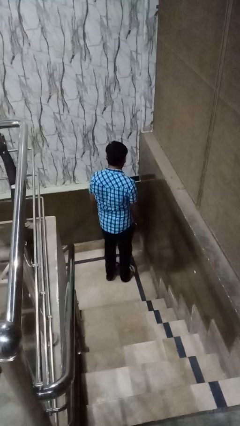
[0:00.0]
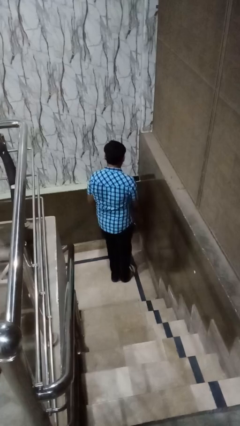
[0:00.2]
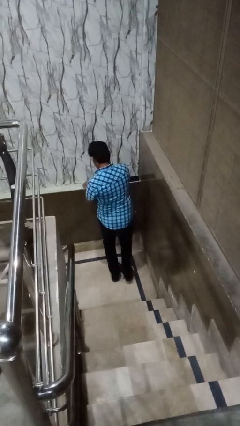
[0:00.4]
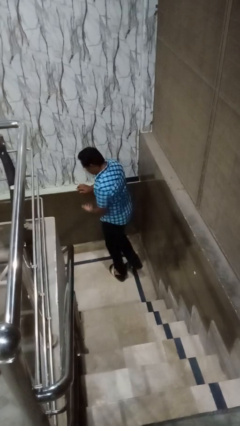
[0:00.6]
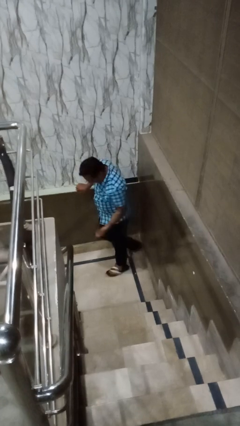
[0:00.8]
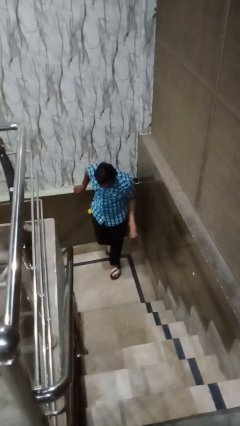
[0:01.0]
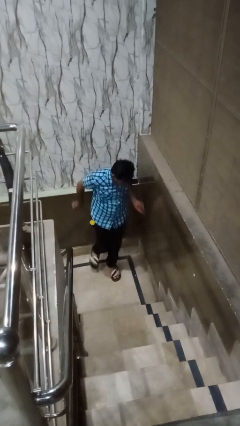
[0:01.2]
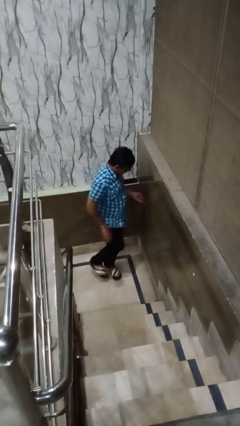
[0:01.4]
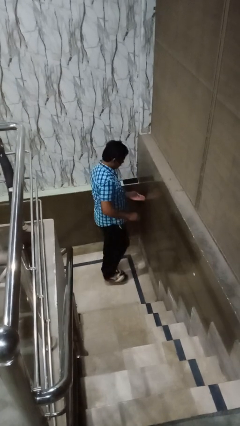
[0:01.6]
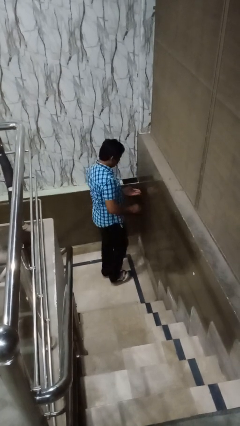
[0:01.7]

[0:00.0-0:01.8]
person twirls

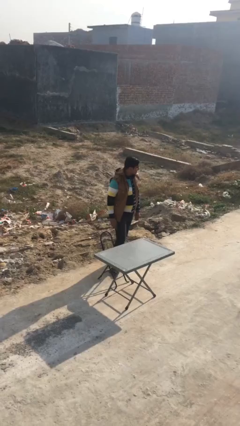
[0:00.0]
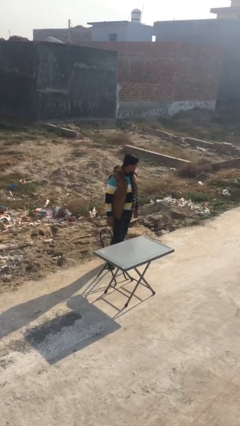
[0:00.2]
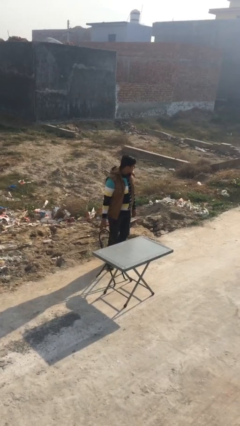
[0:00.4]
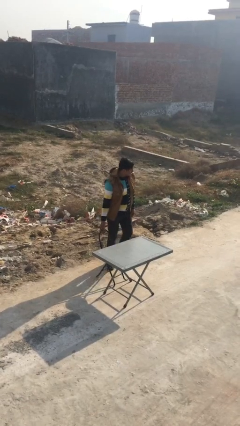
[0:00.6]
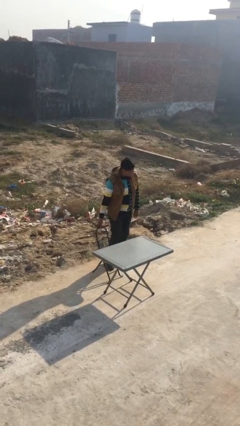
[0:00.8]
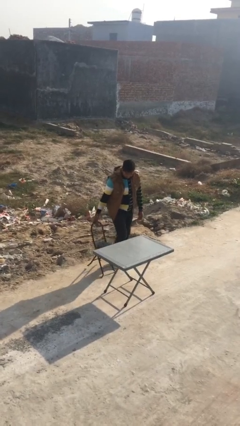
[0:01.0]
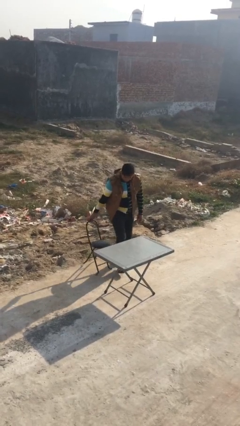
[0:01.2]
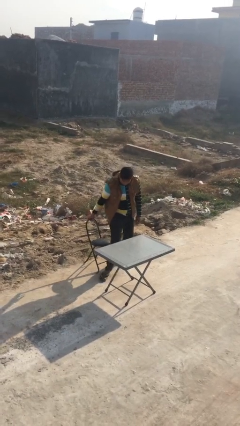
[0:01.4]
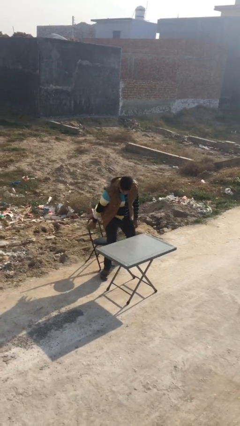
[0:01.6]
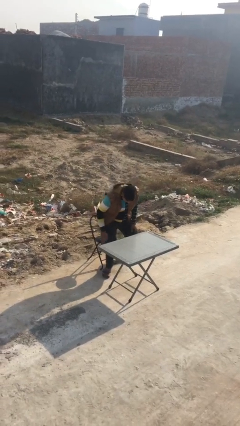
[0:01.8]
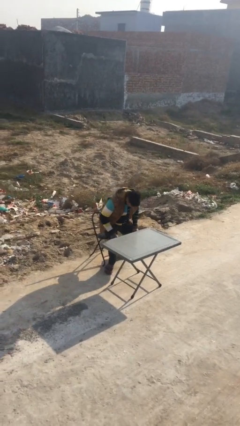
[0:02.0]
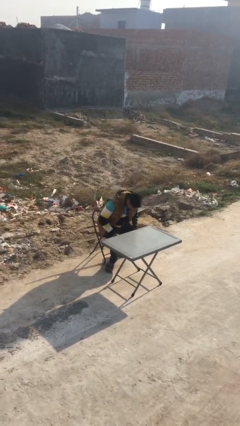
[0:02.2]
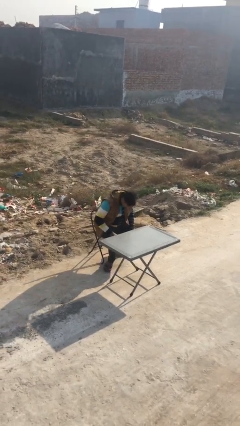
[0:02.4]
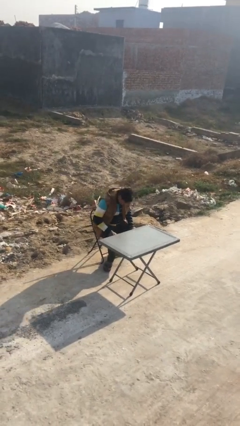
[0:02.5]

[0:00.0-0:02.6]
person sits down

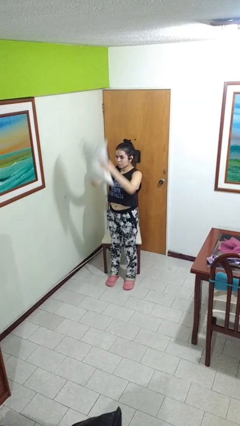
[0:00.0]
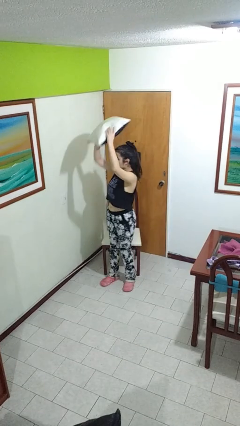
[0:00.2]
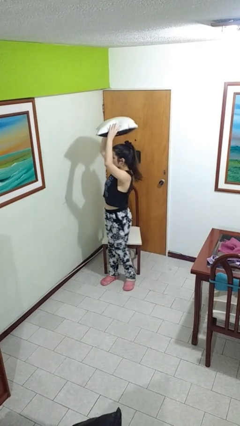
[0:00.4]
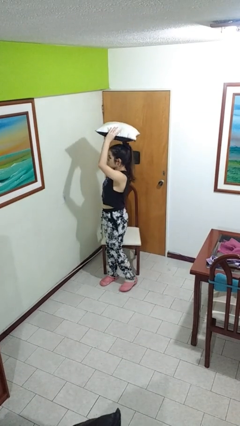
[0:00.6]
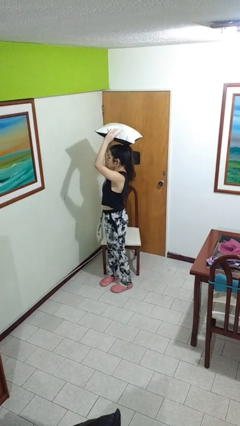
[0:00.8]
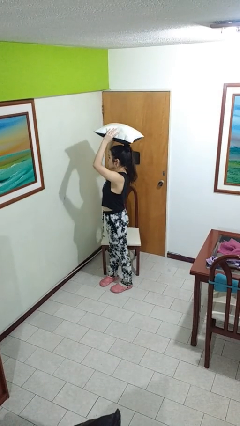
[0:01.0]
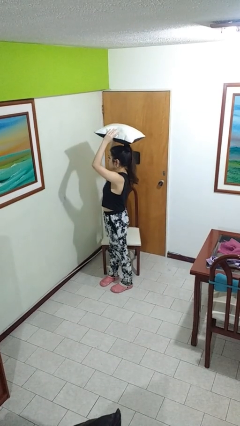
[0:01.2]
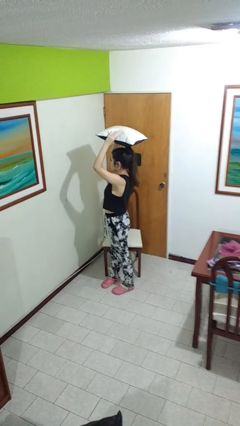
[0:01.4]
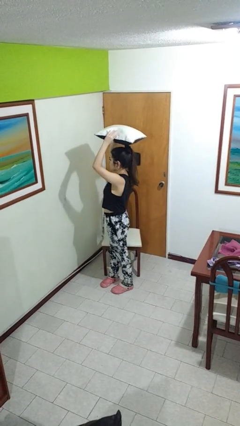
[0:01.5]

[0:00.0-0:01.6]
person holds object above head

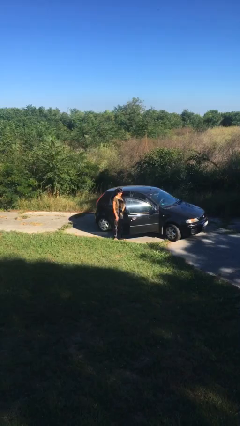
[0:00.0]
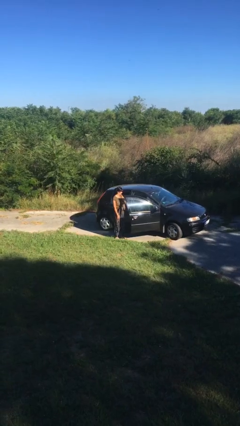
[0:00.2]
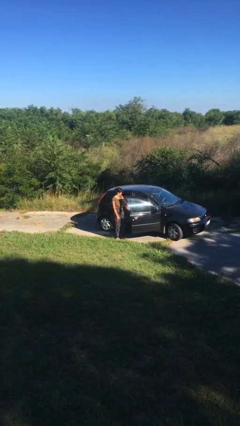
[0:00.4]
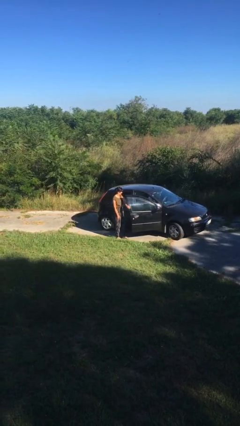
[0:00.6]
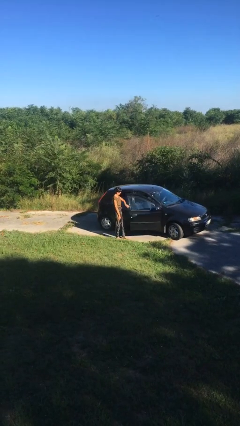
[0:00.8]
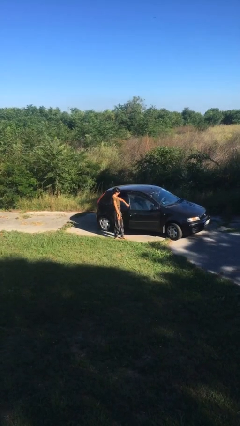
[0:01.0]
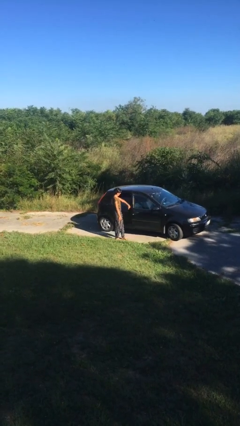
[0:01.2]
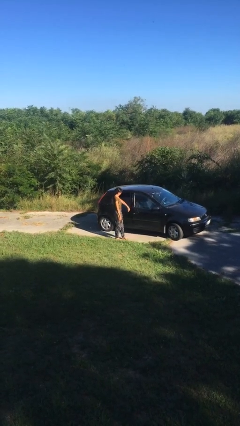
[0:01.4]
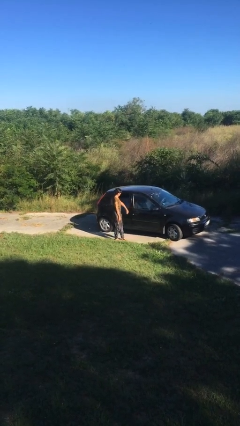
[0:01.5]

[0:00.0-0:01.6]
person closes car door

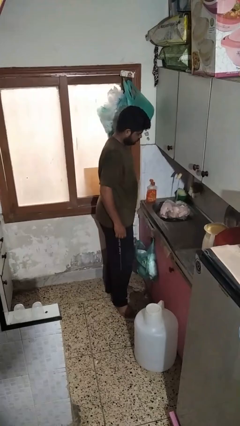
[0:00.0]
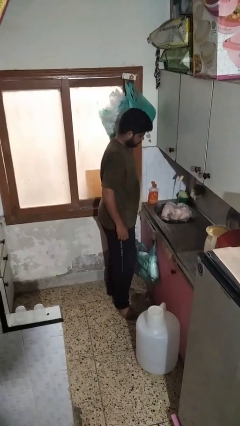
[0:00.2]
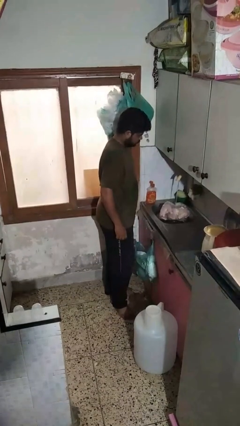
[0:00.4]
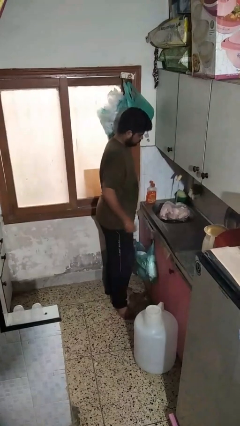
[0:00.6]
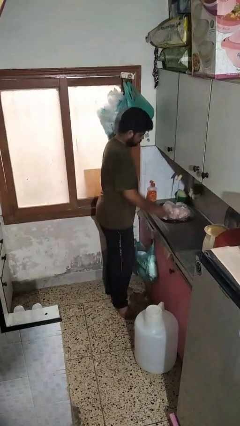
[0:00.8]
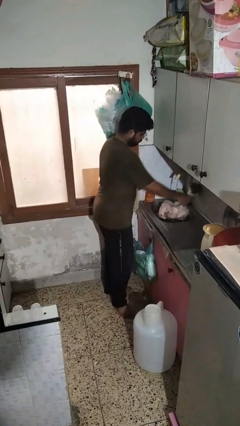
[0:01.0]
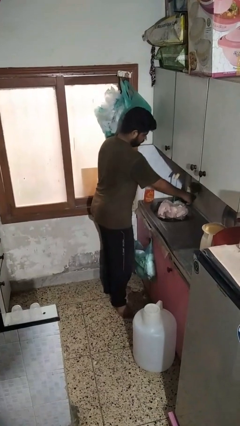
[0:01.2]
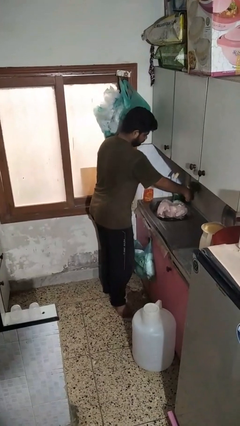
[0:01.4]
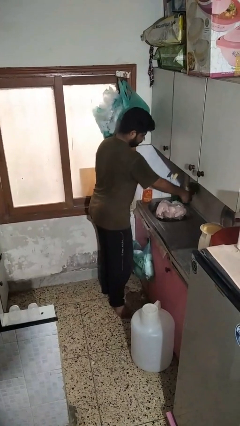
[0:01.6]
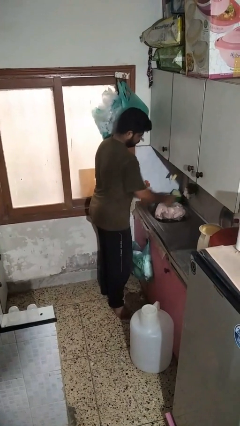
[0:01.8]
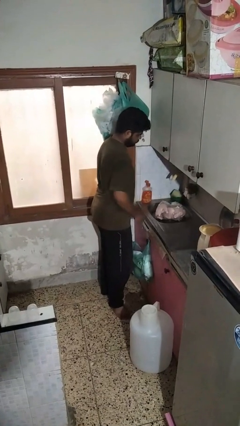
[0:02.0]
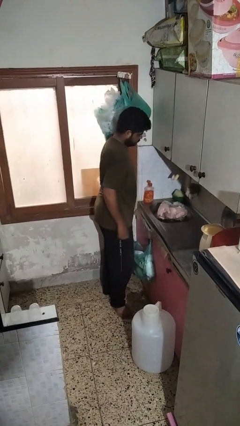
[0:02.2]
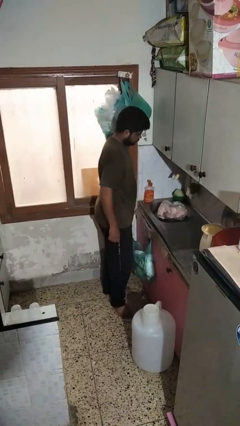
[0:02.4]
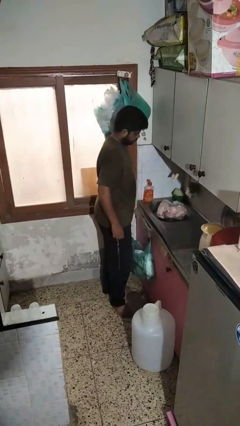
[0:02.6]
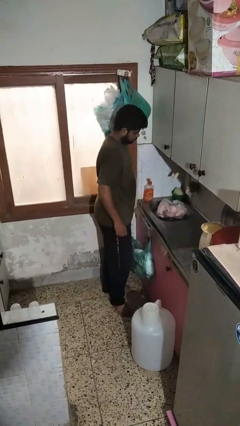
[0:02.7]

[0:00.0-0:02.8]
person turns off faucet

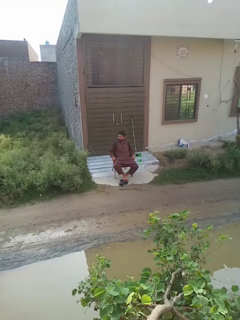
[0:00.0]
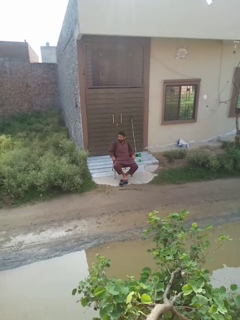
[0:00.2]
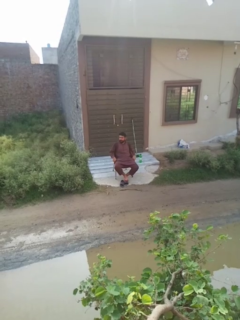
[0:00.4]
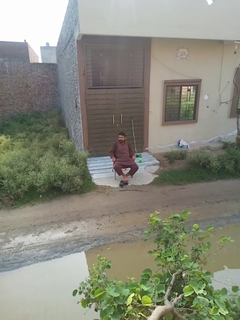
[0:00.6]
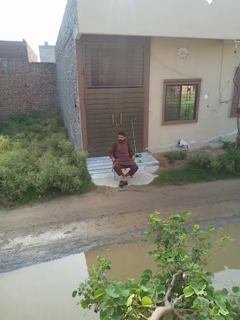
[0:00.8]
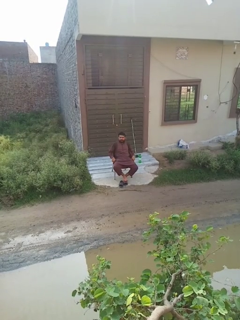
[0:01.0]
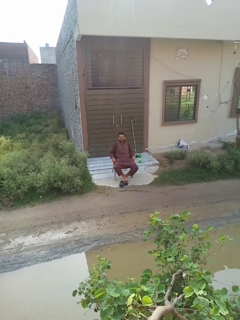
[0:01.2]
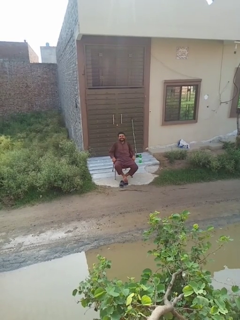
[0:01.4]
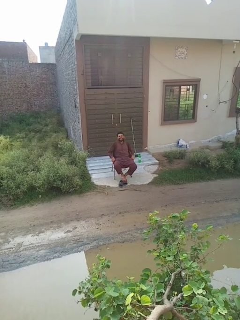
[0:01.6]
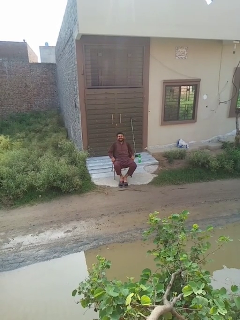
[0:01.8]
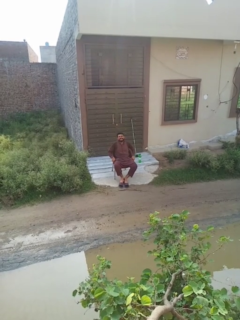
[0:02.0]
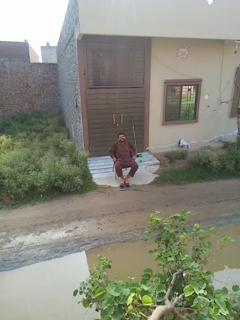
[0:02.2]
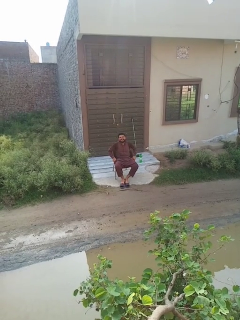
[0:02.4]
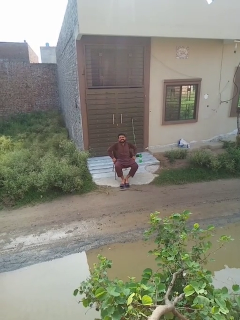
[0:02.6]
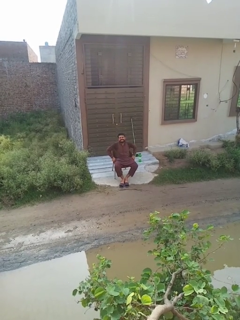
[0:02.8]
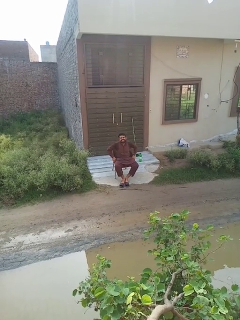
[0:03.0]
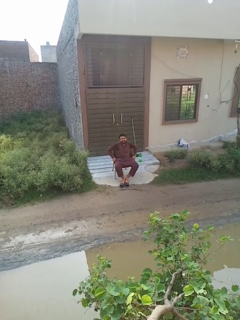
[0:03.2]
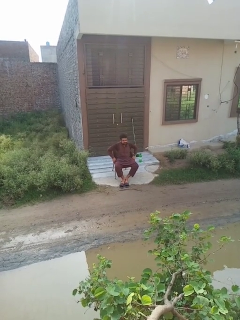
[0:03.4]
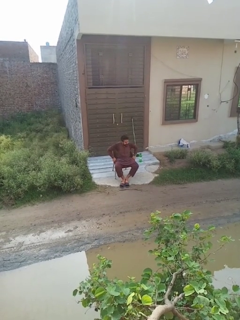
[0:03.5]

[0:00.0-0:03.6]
person flosses

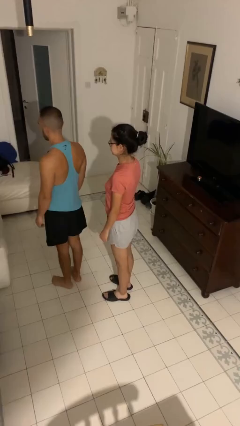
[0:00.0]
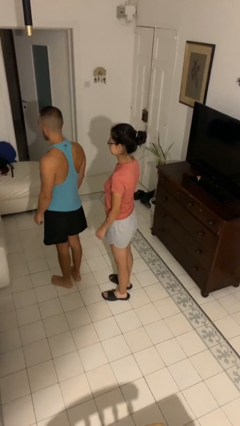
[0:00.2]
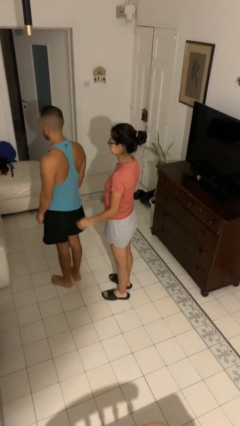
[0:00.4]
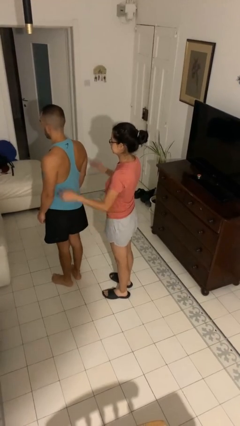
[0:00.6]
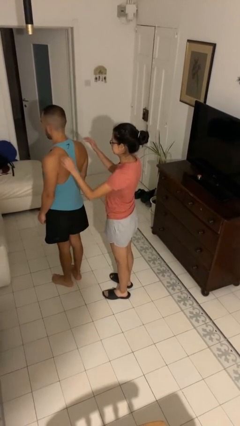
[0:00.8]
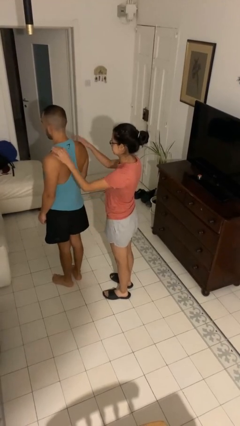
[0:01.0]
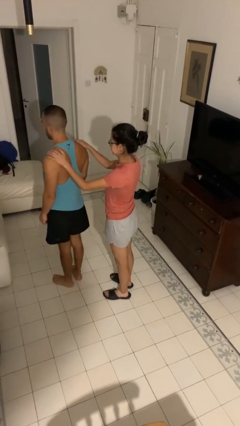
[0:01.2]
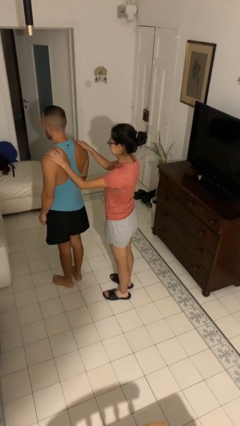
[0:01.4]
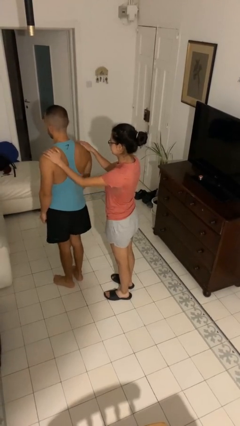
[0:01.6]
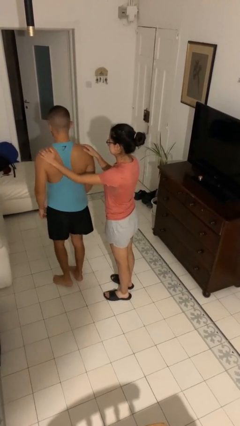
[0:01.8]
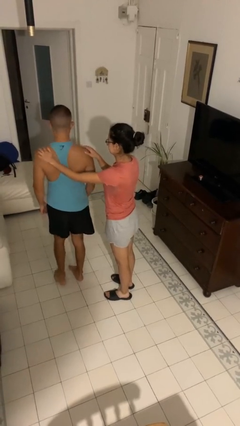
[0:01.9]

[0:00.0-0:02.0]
person grabs person by shoulder

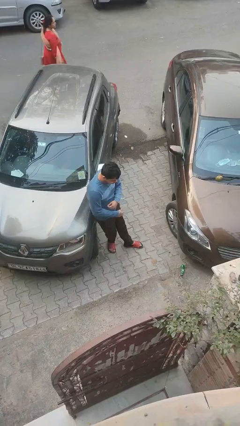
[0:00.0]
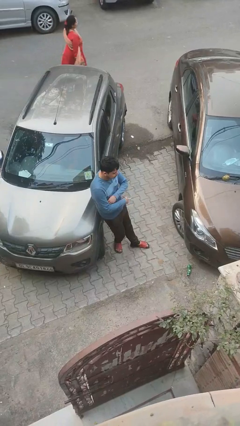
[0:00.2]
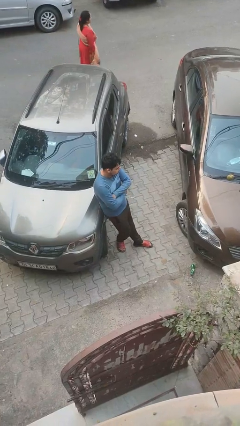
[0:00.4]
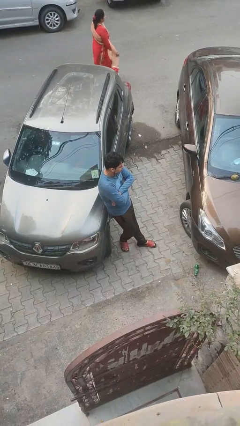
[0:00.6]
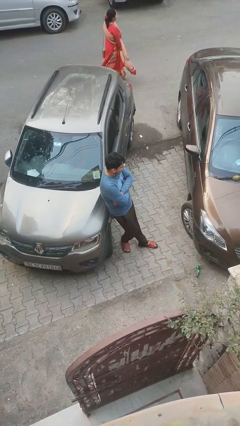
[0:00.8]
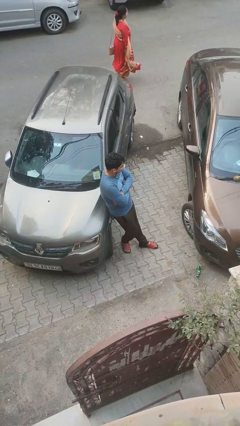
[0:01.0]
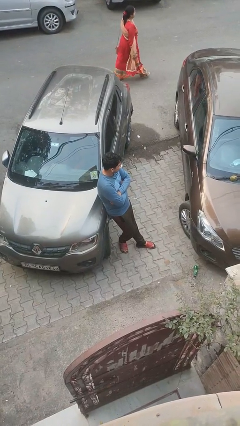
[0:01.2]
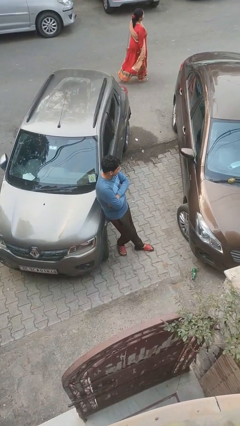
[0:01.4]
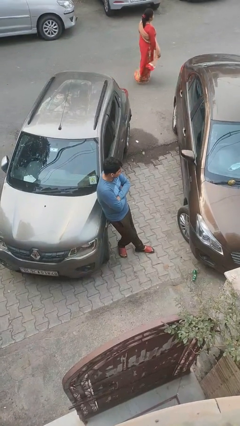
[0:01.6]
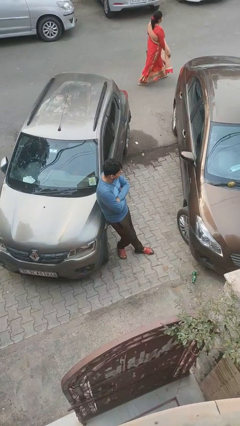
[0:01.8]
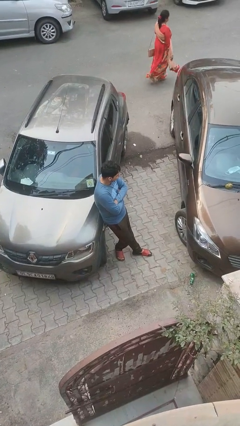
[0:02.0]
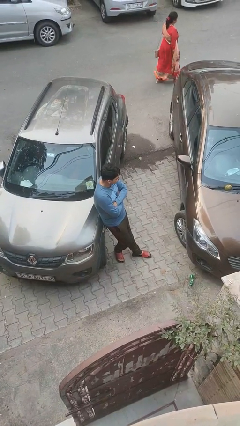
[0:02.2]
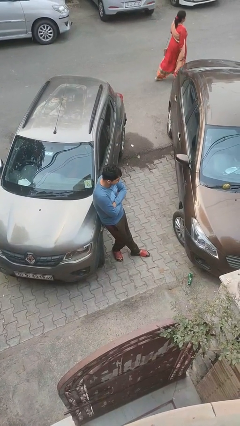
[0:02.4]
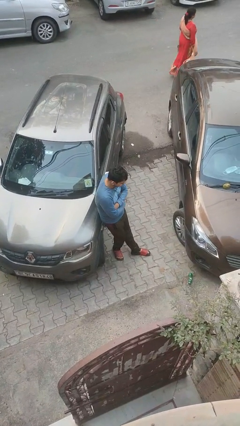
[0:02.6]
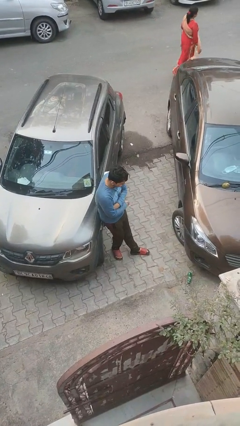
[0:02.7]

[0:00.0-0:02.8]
person leans against car
